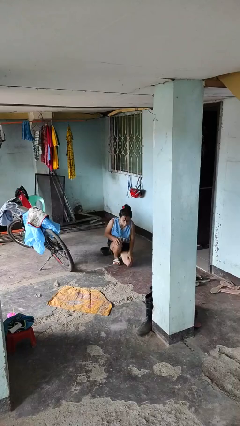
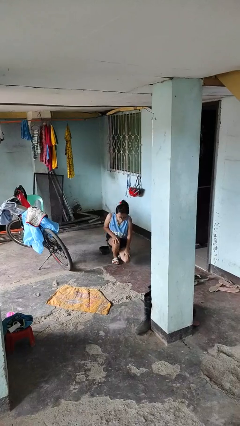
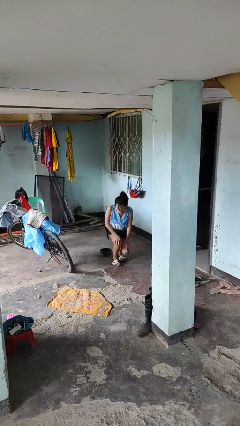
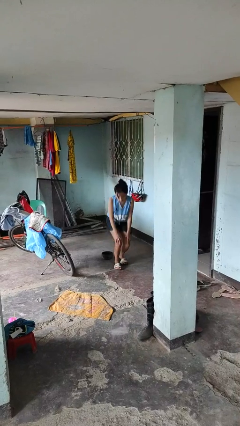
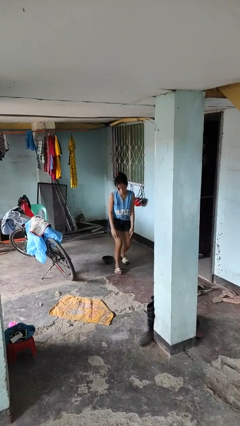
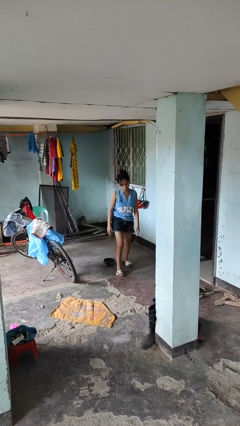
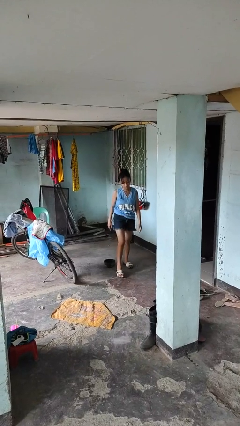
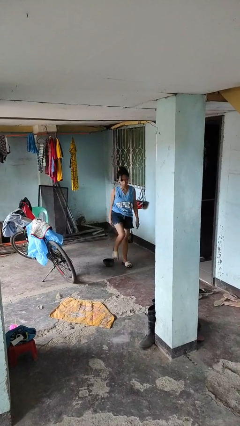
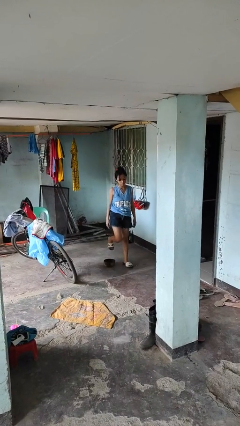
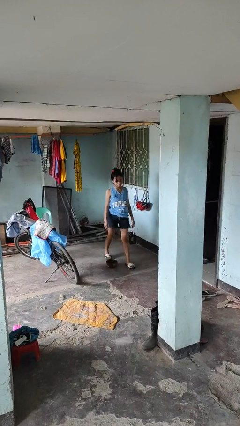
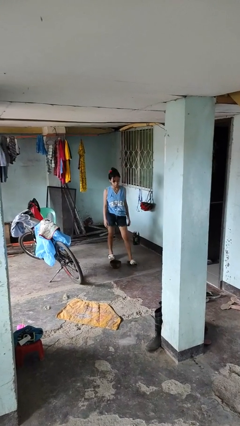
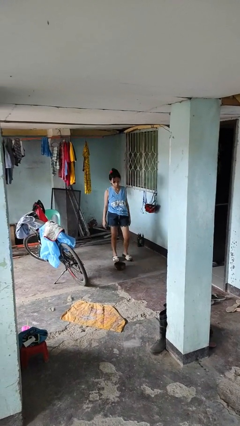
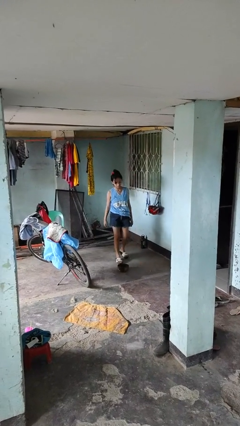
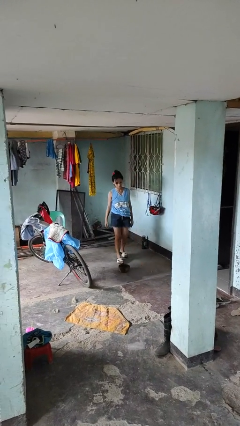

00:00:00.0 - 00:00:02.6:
person stands up from floor

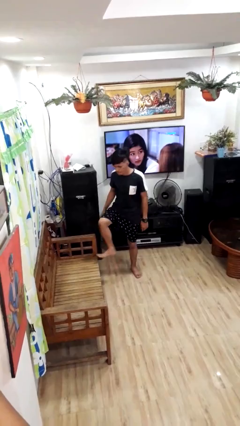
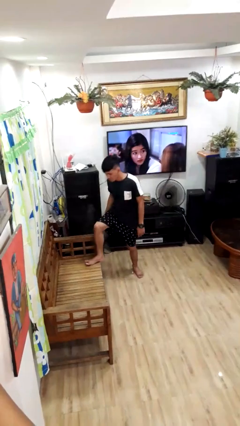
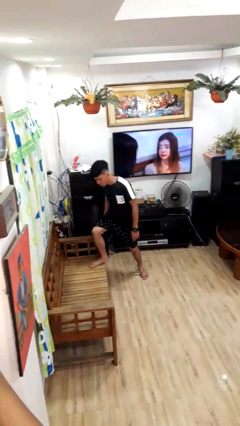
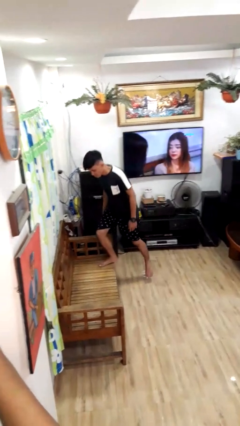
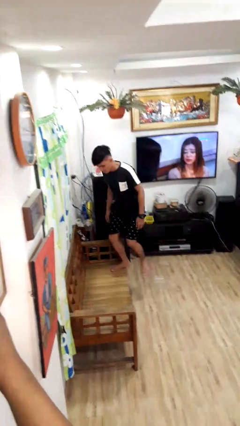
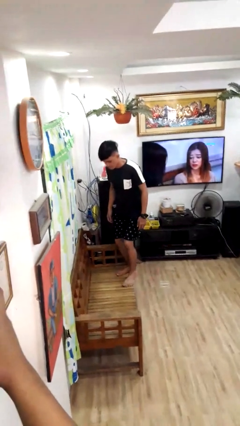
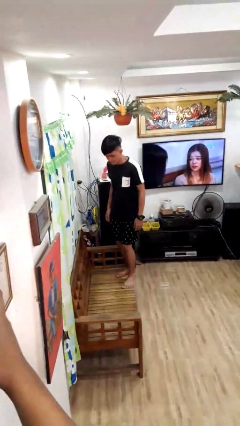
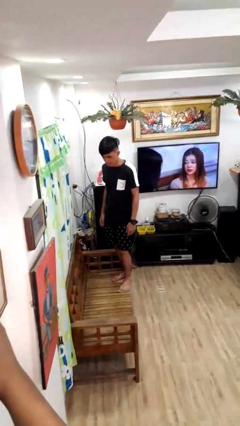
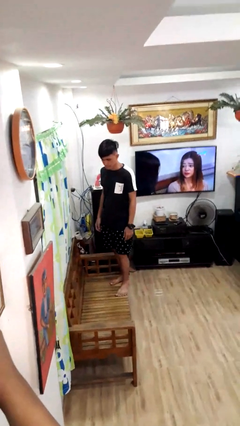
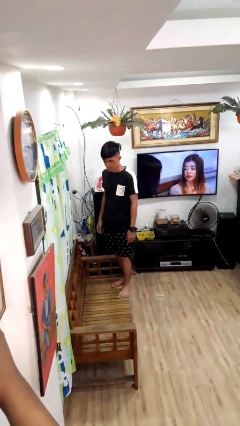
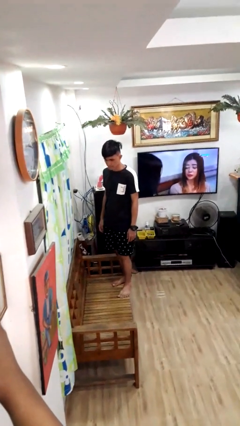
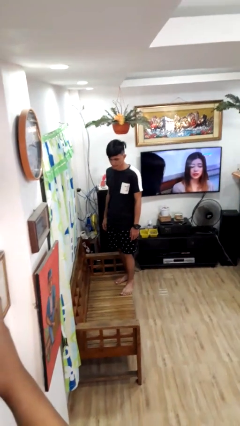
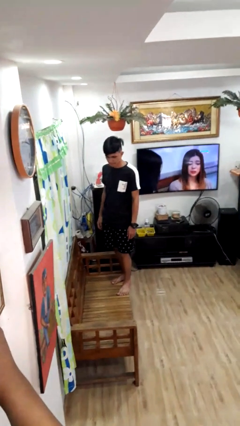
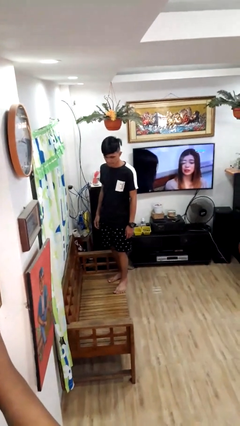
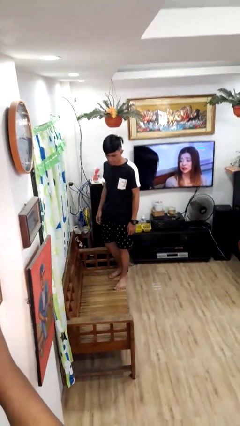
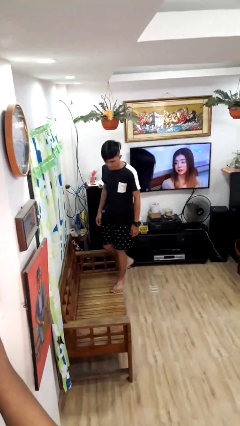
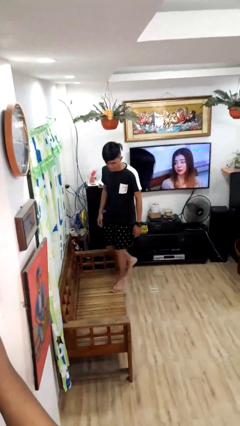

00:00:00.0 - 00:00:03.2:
person climbs on couch

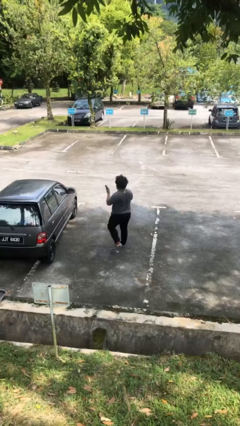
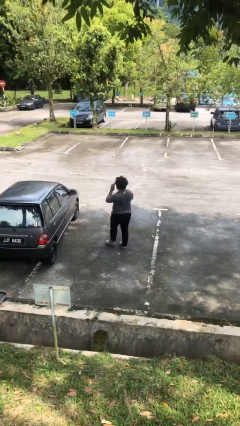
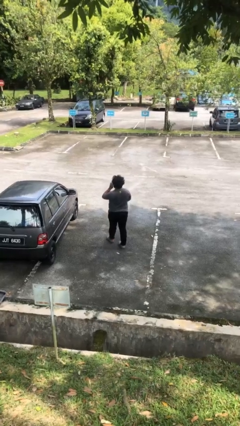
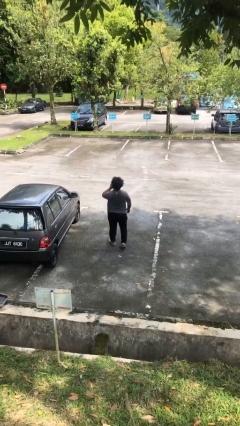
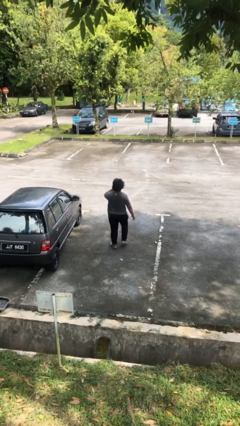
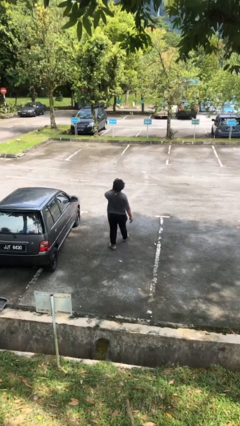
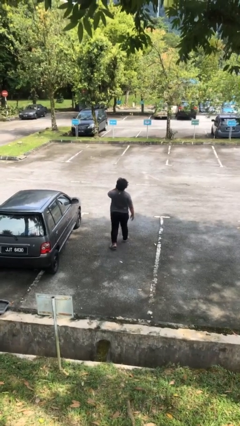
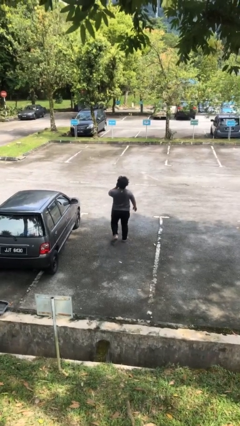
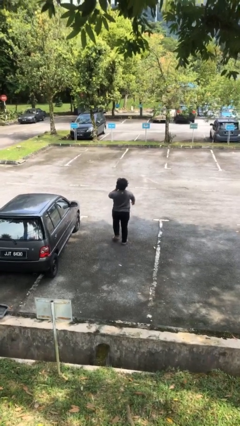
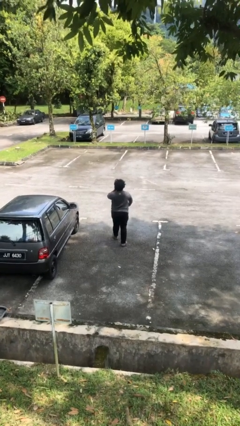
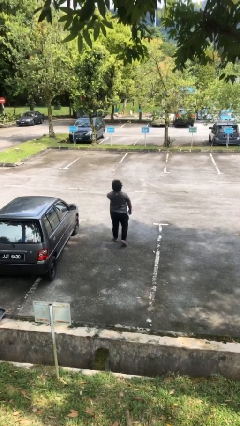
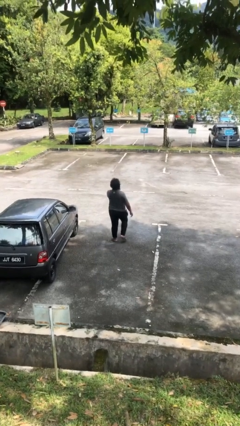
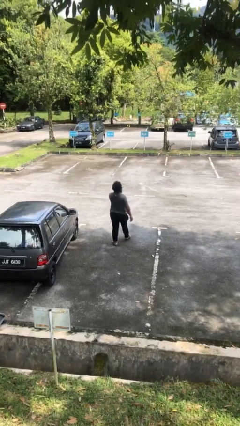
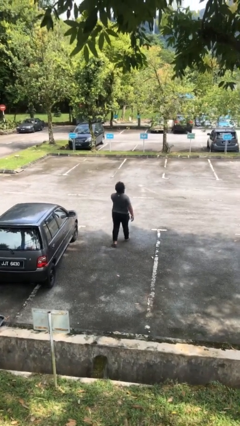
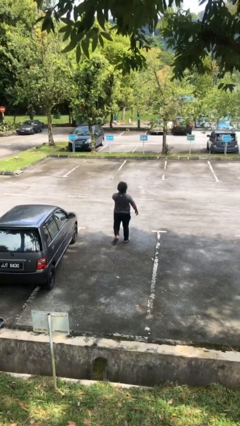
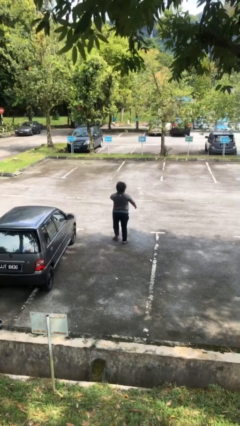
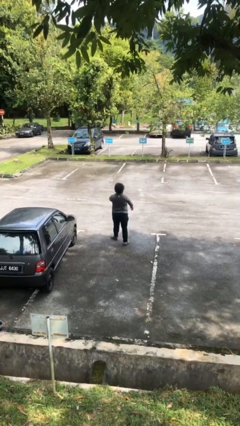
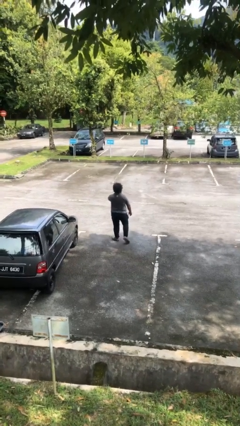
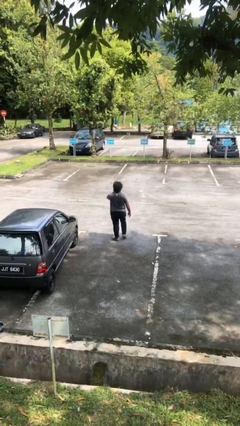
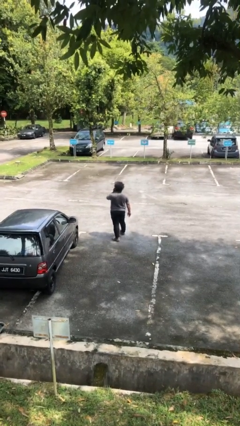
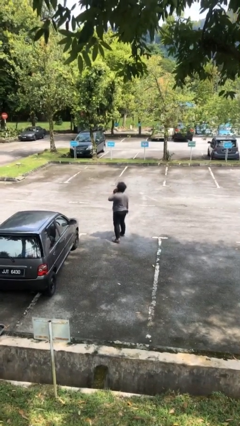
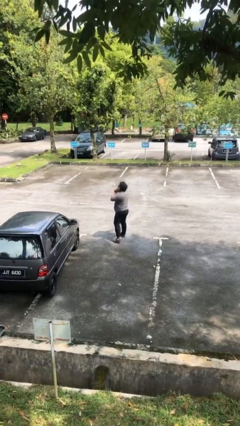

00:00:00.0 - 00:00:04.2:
person talks on phone

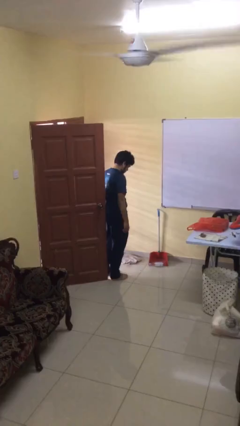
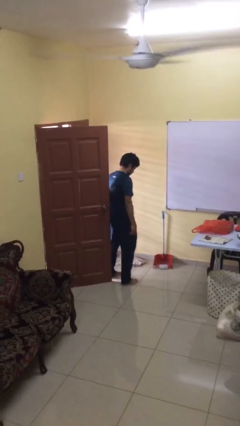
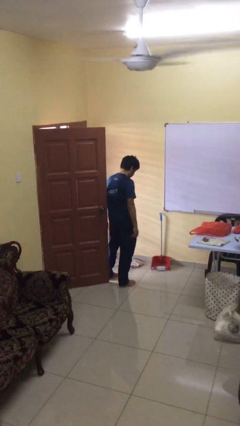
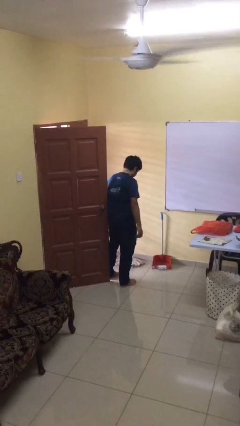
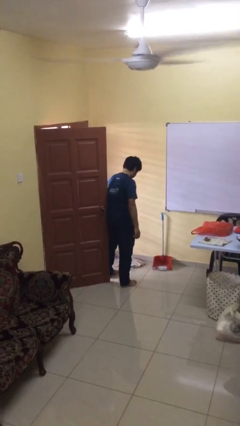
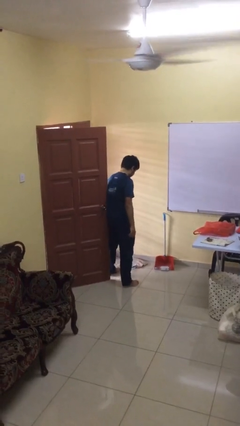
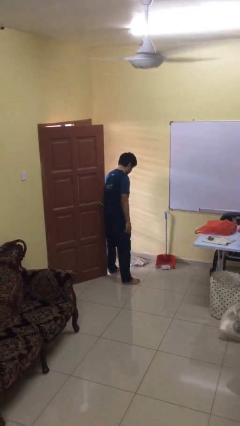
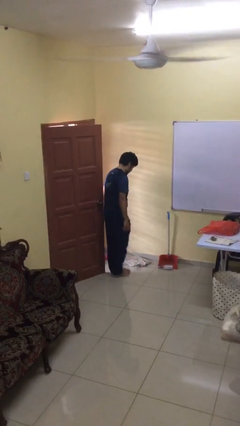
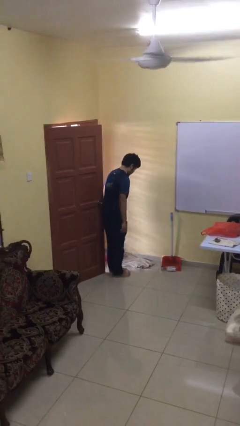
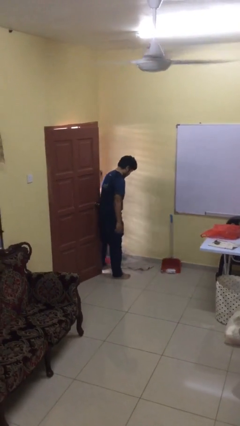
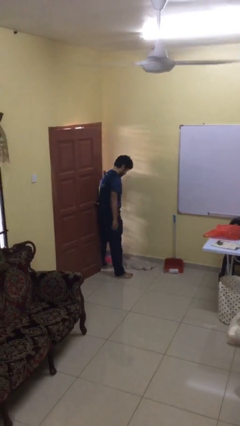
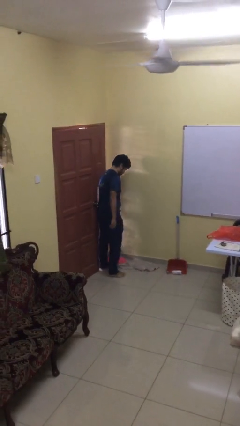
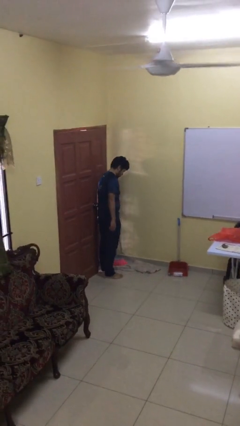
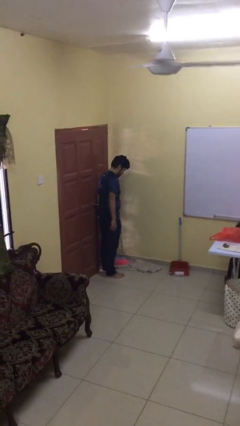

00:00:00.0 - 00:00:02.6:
person closes door with hip

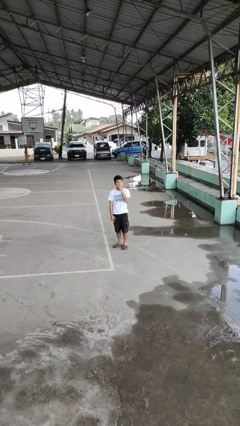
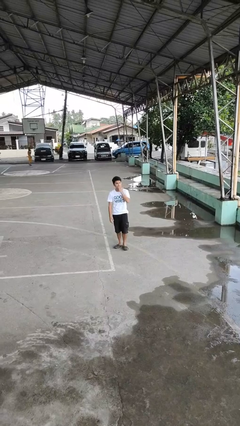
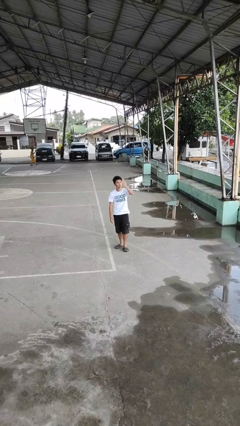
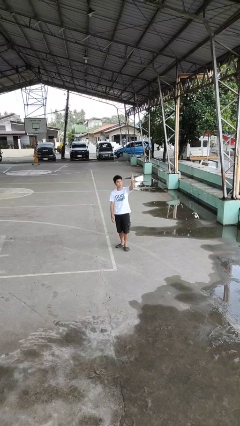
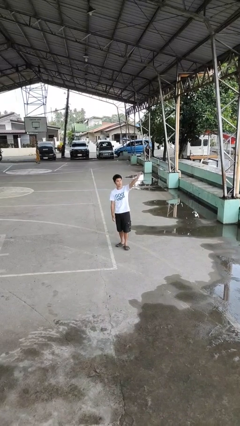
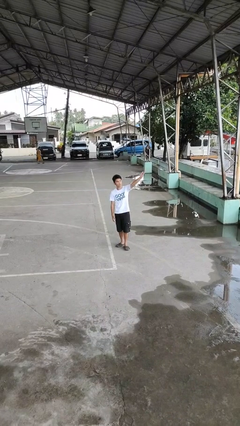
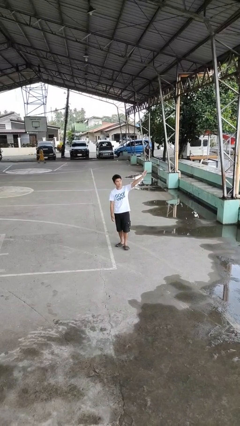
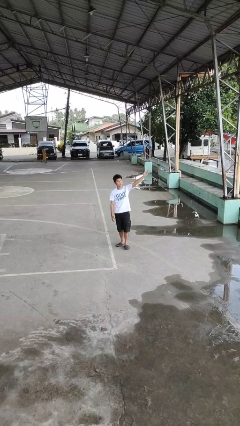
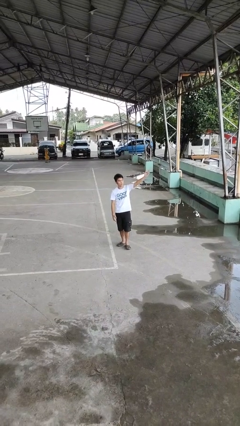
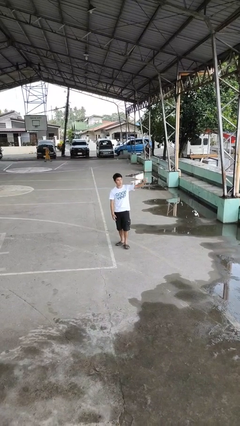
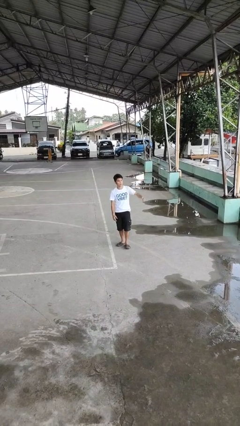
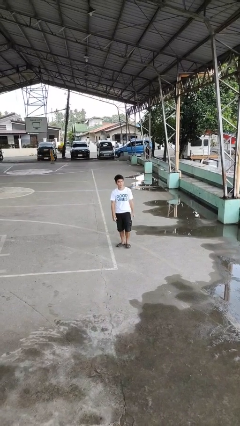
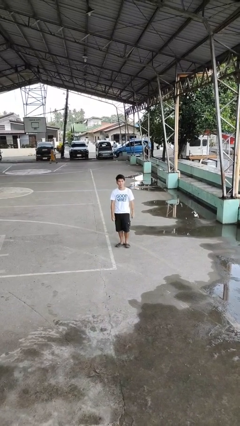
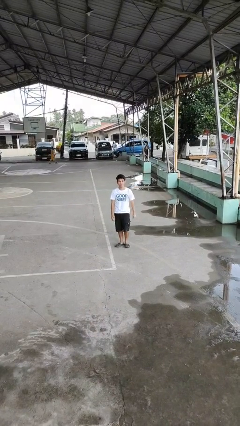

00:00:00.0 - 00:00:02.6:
person gestures blow kiss

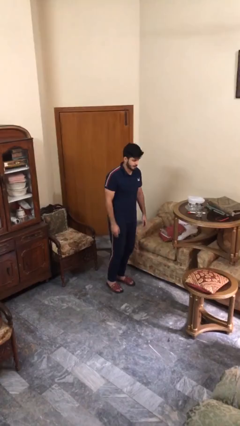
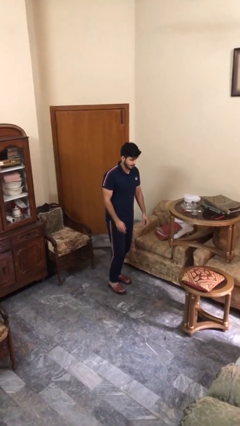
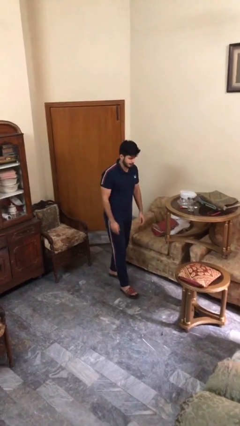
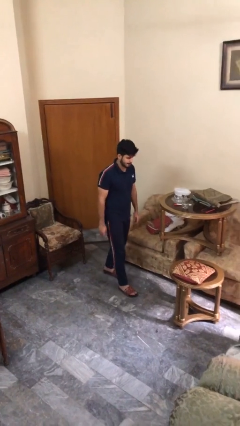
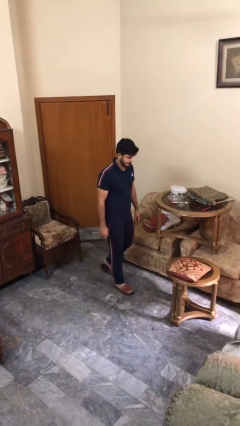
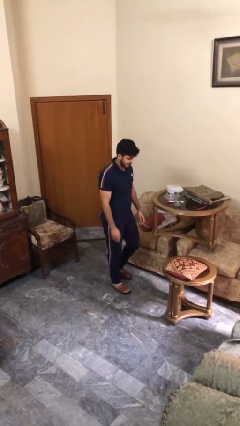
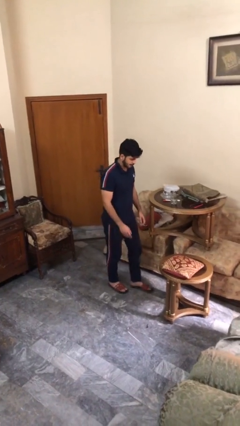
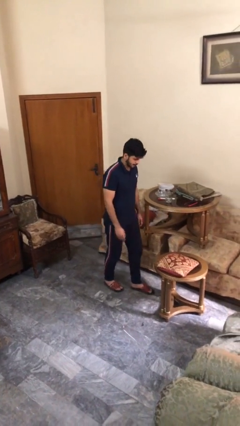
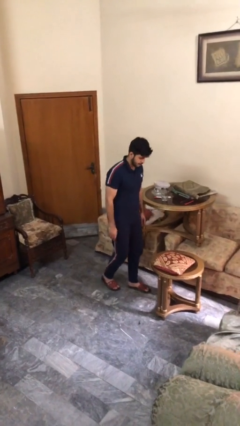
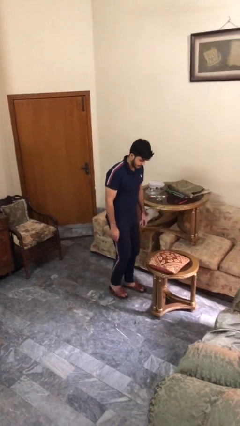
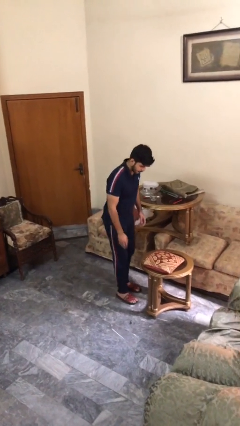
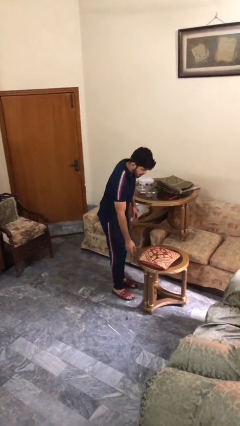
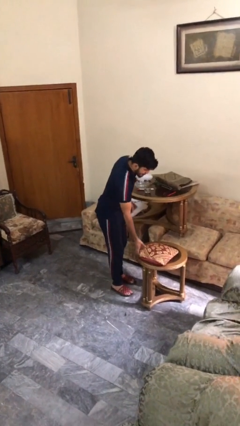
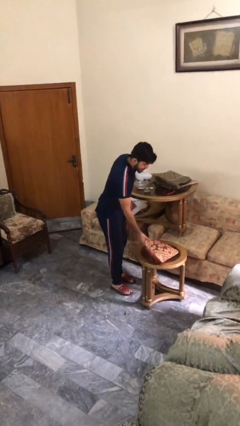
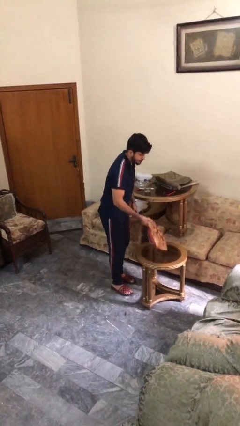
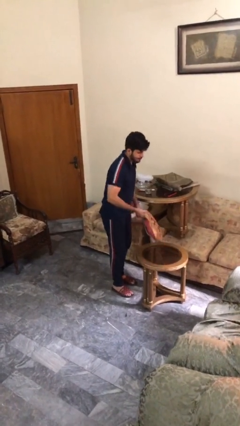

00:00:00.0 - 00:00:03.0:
person picks up object from table
